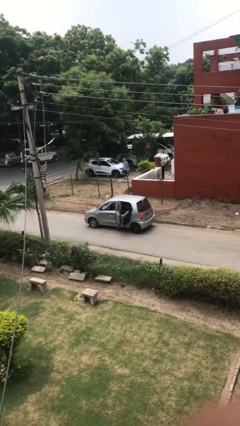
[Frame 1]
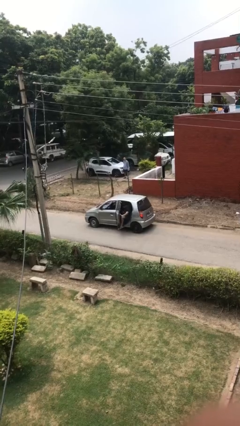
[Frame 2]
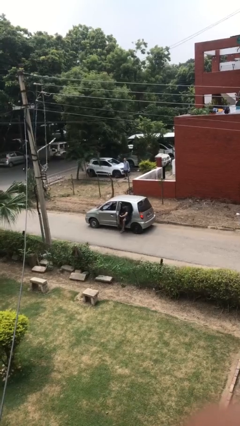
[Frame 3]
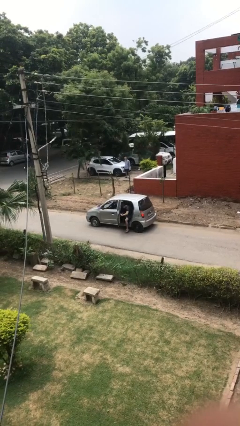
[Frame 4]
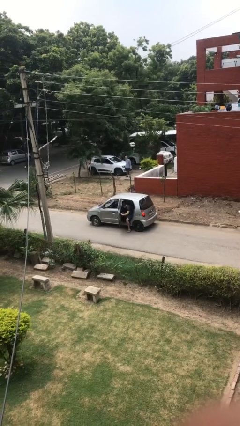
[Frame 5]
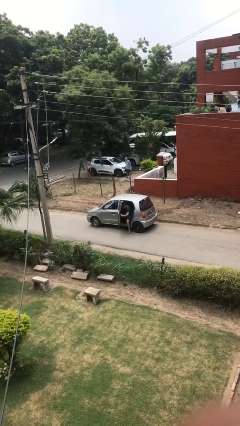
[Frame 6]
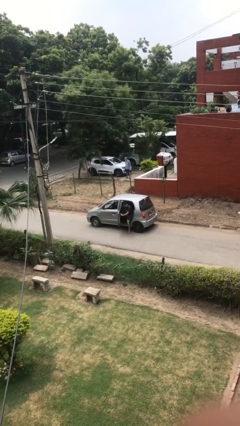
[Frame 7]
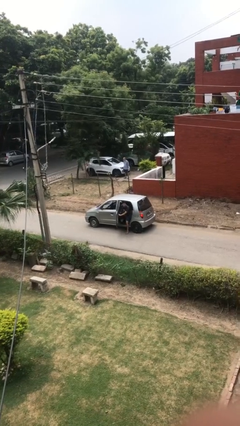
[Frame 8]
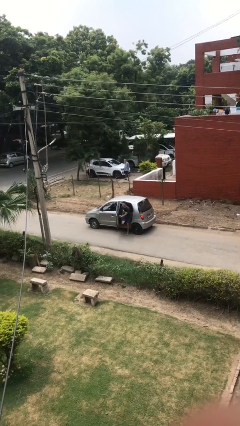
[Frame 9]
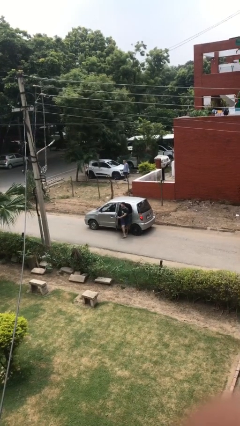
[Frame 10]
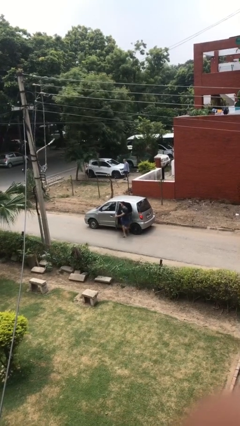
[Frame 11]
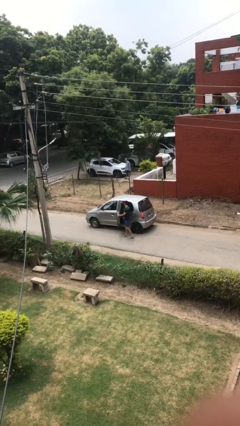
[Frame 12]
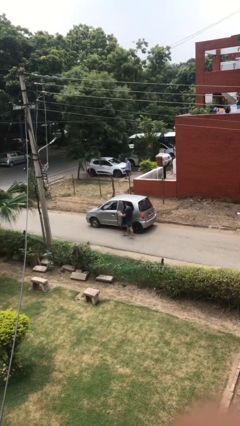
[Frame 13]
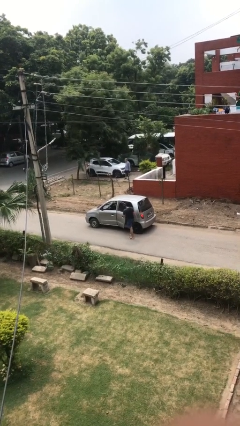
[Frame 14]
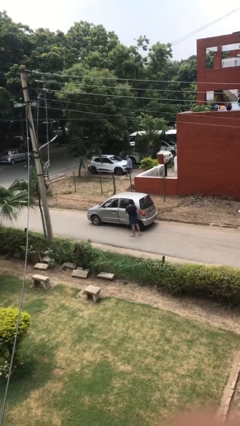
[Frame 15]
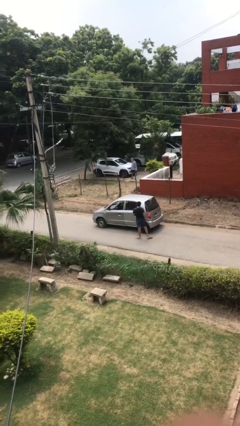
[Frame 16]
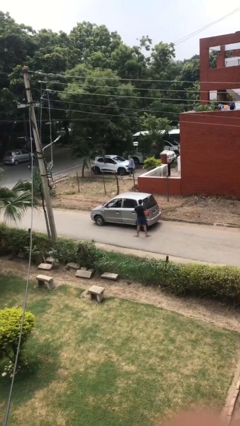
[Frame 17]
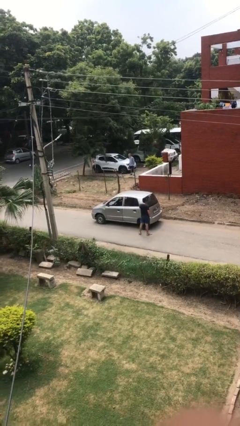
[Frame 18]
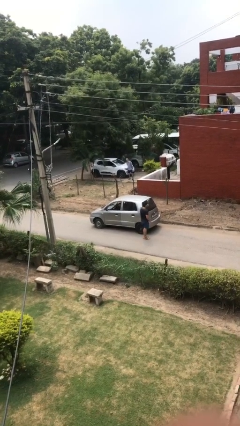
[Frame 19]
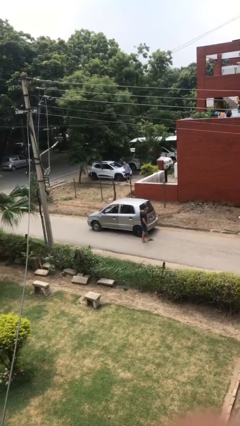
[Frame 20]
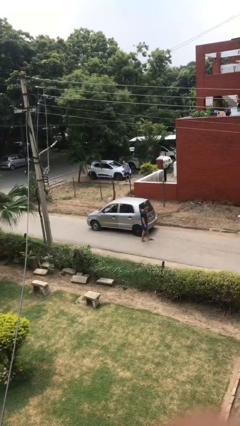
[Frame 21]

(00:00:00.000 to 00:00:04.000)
car drops off person

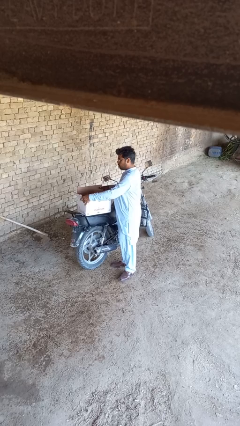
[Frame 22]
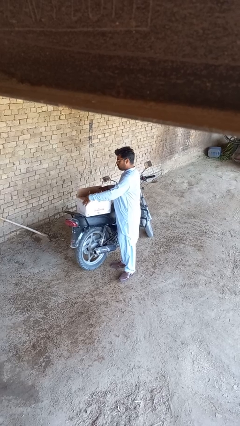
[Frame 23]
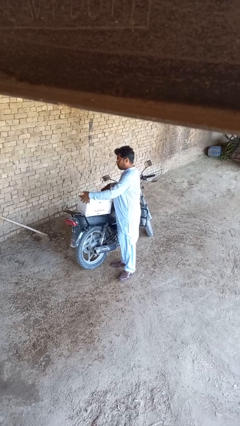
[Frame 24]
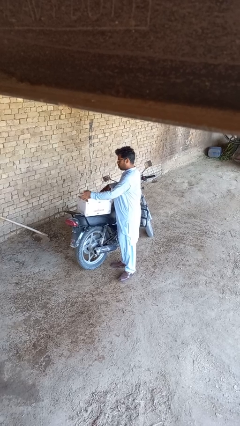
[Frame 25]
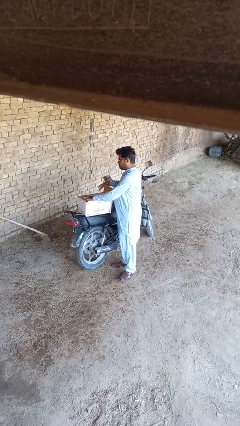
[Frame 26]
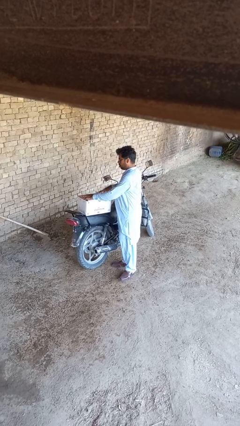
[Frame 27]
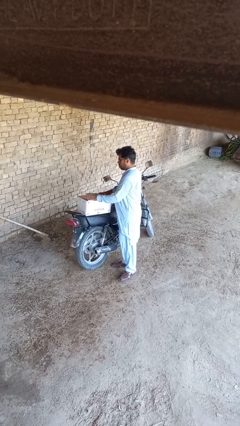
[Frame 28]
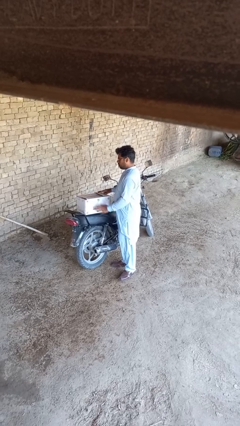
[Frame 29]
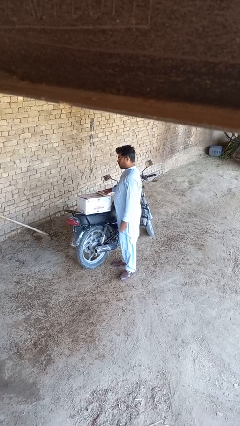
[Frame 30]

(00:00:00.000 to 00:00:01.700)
person closes box

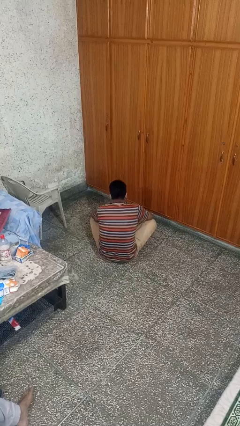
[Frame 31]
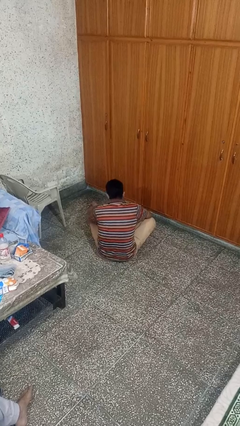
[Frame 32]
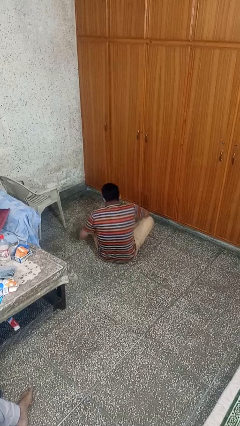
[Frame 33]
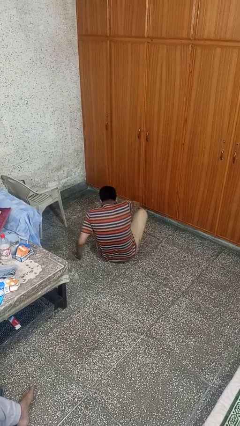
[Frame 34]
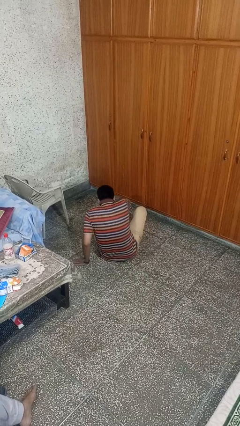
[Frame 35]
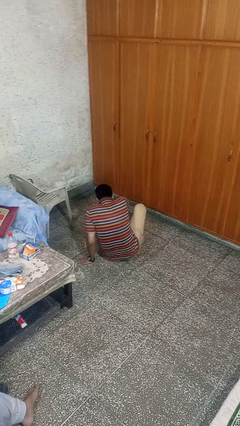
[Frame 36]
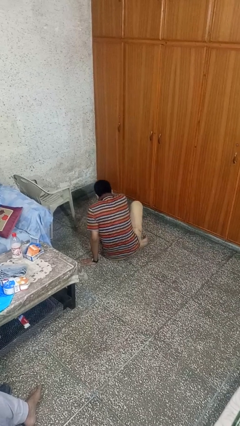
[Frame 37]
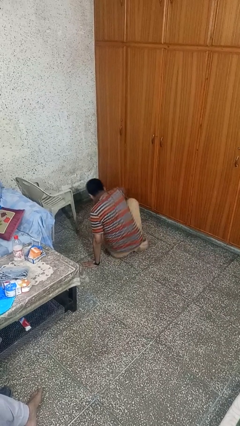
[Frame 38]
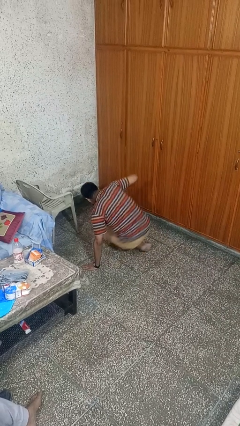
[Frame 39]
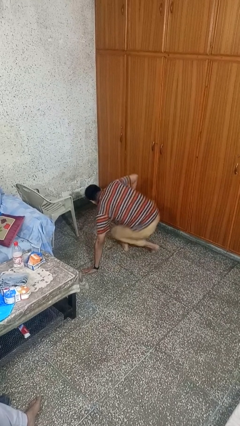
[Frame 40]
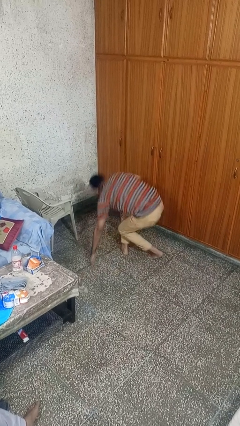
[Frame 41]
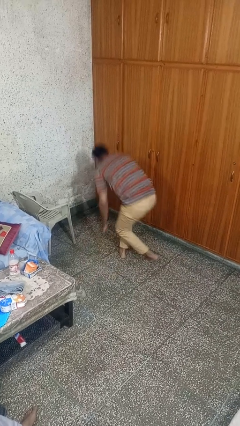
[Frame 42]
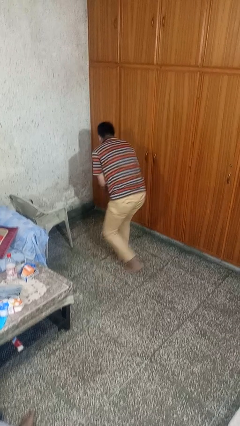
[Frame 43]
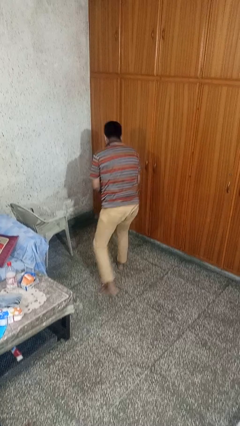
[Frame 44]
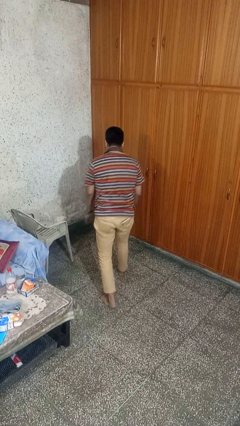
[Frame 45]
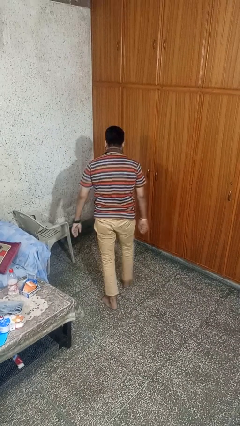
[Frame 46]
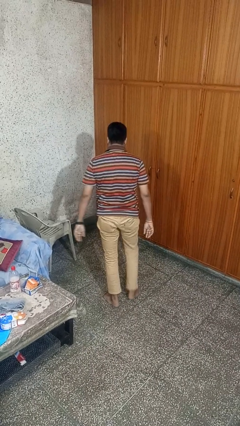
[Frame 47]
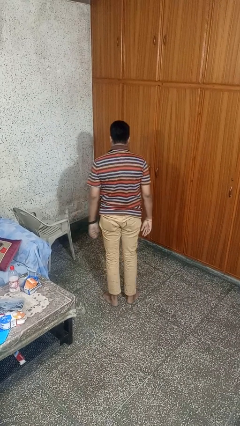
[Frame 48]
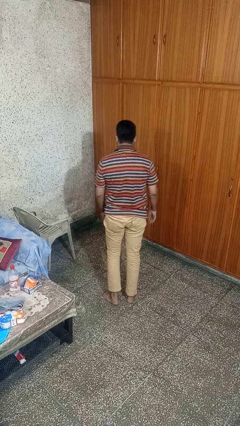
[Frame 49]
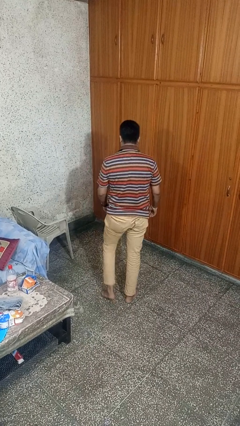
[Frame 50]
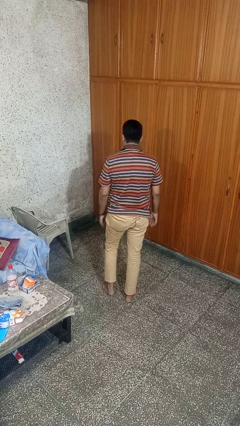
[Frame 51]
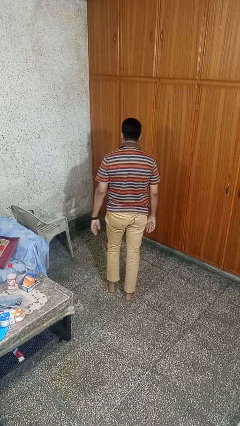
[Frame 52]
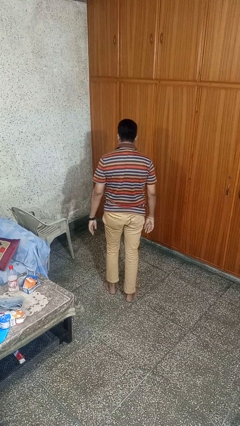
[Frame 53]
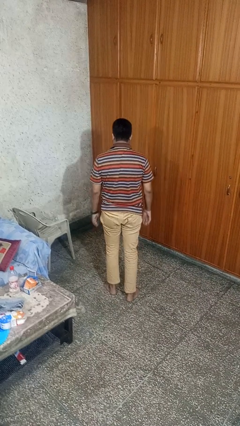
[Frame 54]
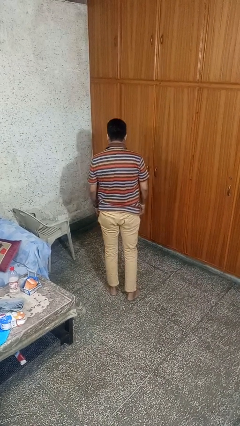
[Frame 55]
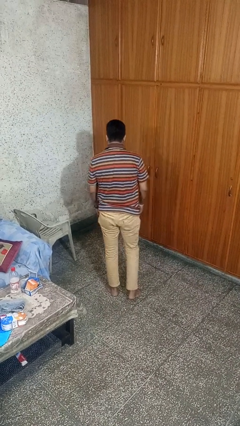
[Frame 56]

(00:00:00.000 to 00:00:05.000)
person stands up from floor

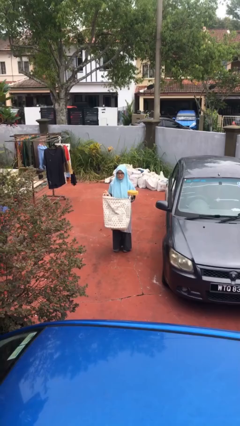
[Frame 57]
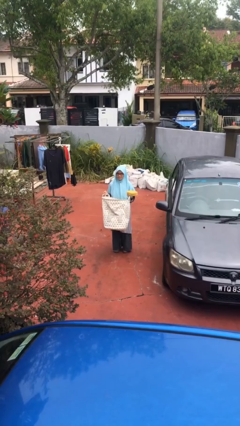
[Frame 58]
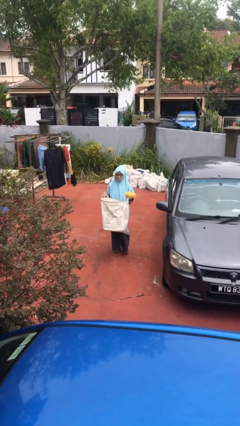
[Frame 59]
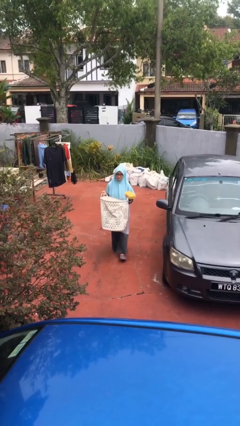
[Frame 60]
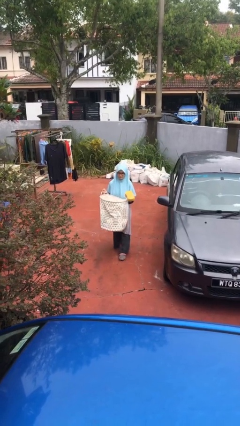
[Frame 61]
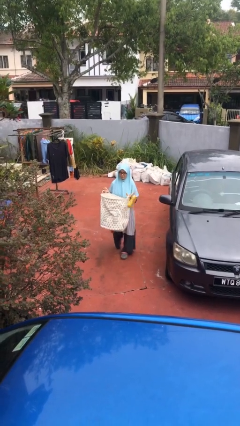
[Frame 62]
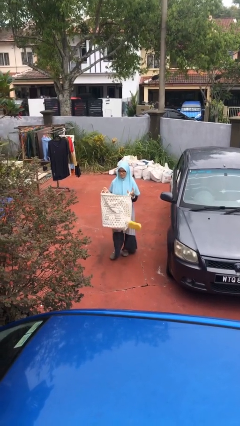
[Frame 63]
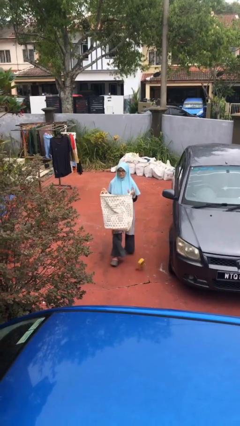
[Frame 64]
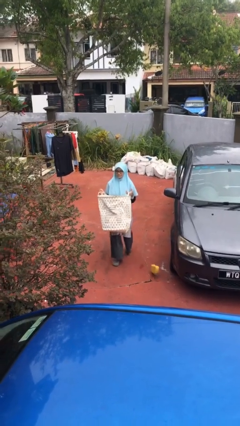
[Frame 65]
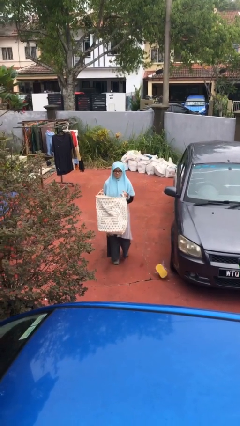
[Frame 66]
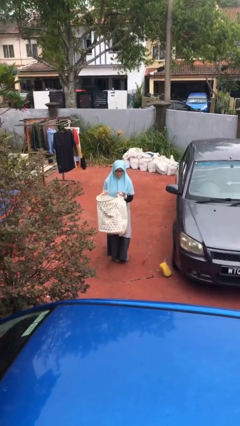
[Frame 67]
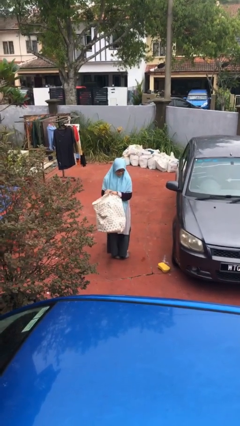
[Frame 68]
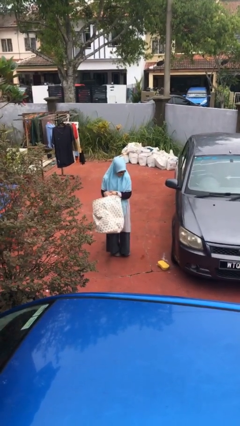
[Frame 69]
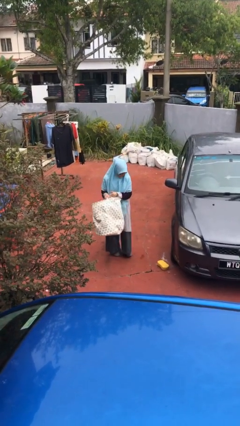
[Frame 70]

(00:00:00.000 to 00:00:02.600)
person drops object

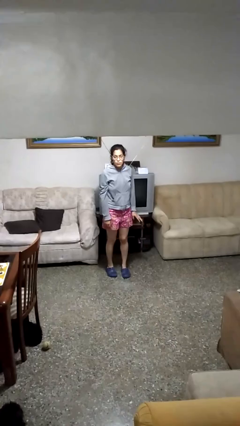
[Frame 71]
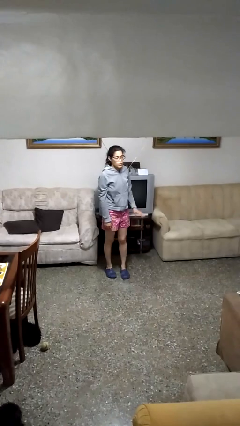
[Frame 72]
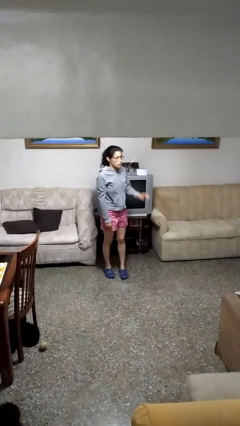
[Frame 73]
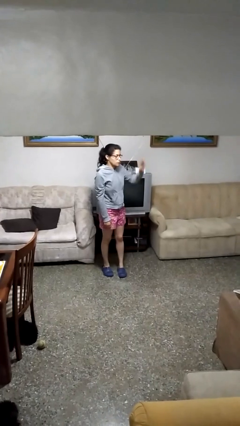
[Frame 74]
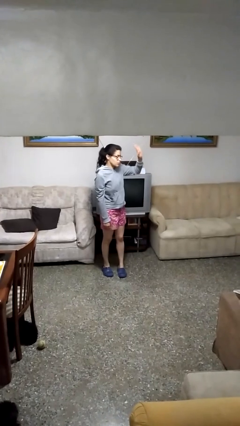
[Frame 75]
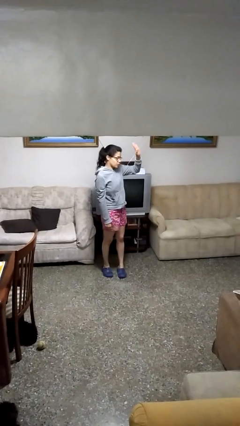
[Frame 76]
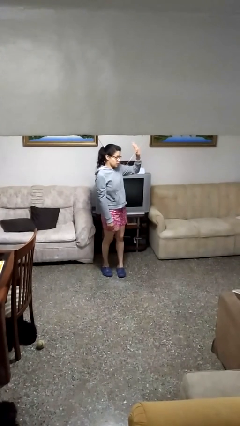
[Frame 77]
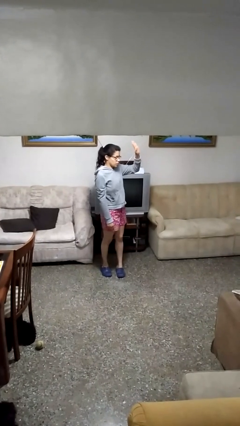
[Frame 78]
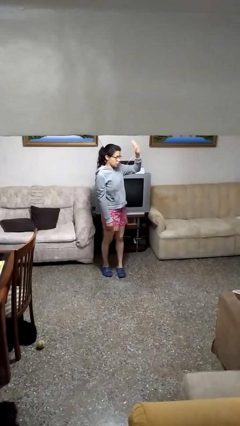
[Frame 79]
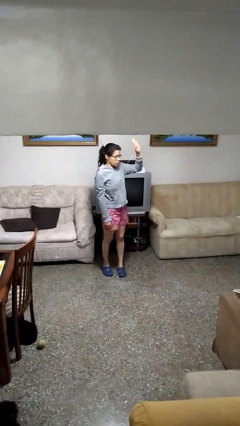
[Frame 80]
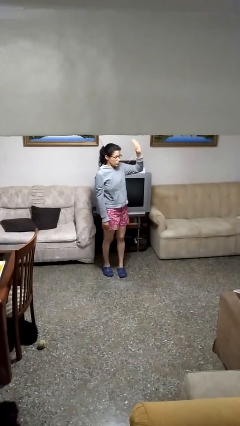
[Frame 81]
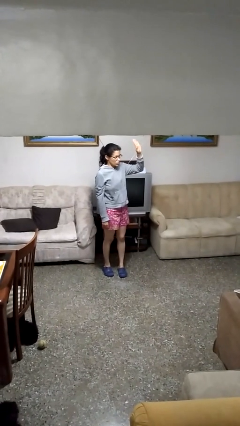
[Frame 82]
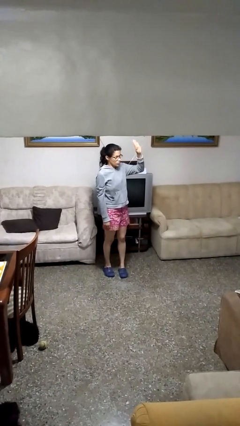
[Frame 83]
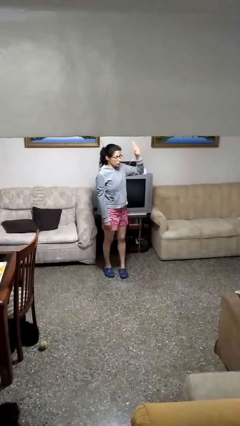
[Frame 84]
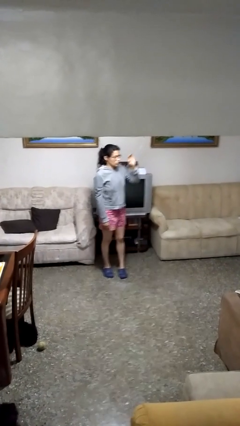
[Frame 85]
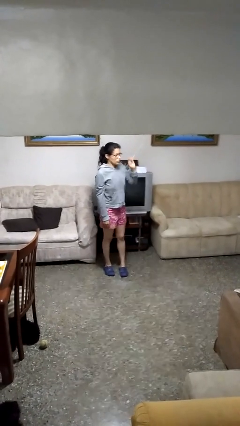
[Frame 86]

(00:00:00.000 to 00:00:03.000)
person gestures raise hand

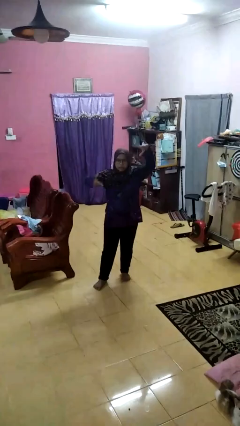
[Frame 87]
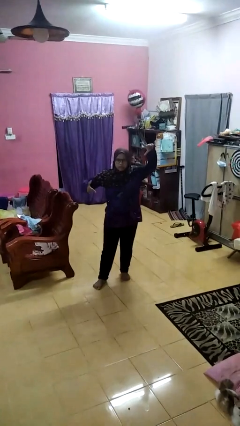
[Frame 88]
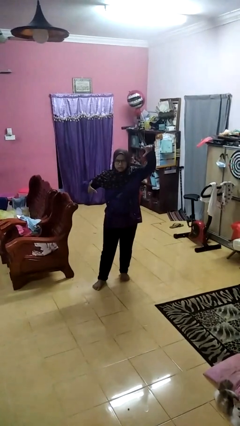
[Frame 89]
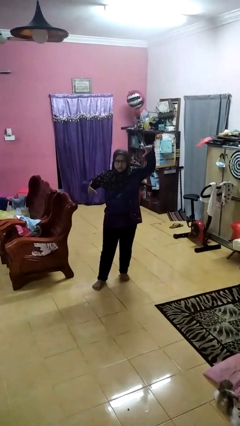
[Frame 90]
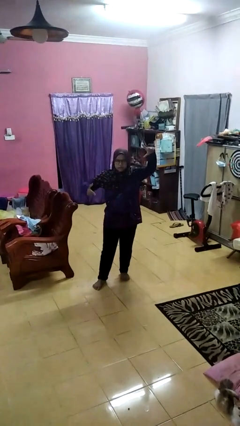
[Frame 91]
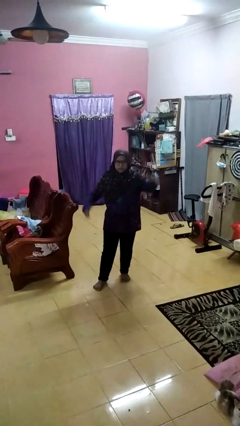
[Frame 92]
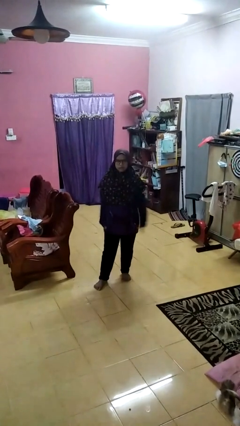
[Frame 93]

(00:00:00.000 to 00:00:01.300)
person gestures zoom out
